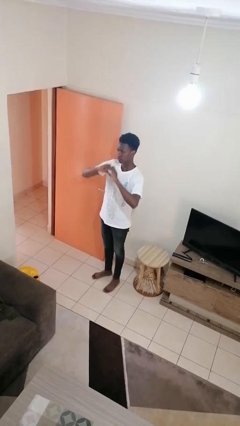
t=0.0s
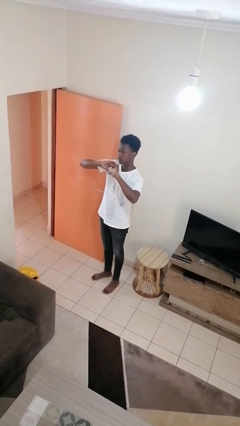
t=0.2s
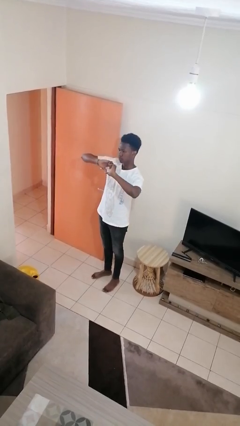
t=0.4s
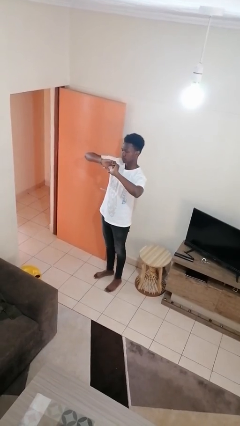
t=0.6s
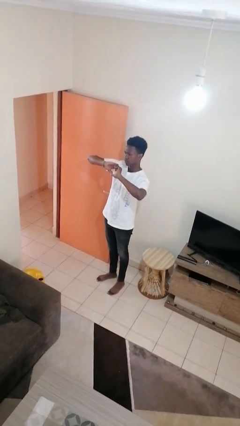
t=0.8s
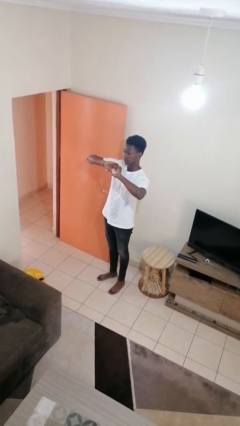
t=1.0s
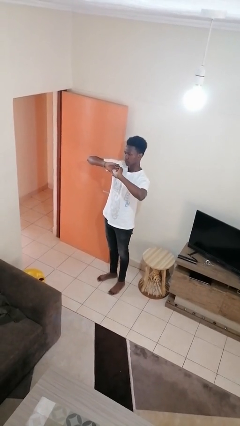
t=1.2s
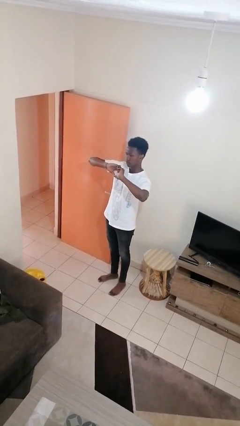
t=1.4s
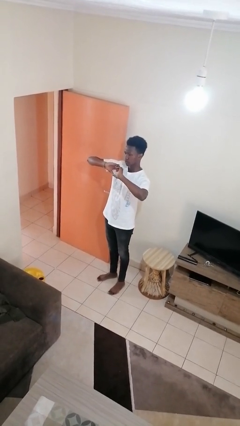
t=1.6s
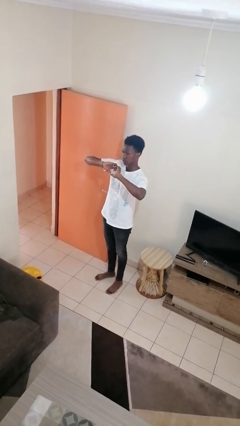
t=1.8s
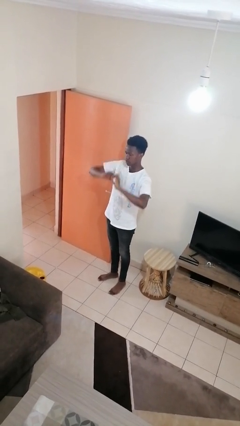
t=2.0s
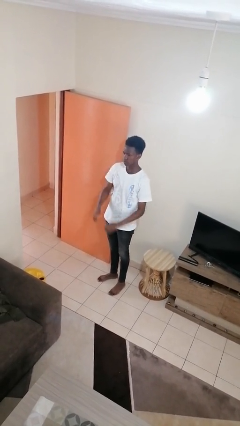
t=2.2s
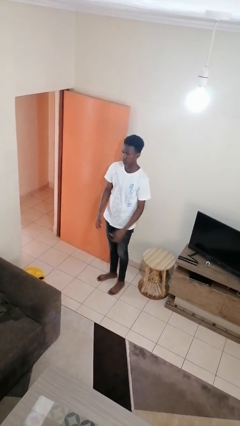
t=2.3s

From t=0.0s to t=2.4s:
person gestures heart

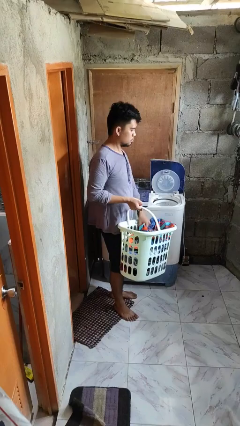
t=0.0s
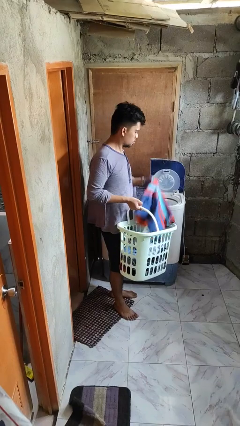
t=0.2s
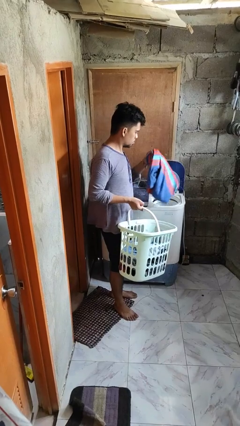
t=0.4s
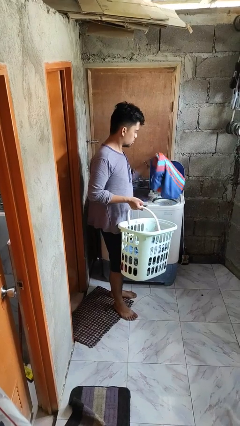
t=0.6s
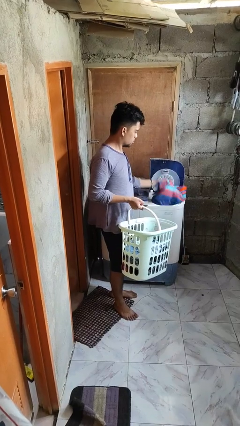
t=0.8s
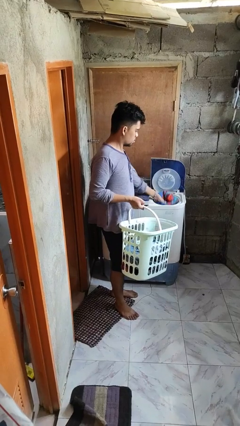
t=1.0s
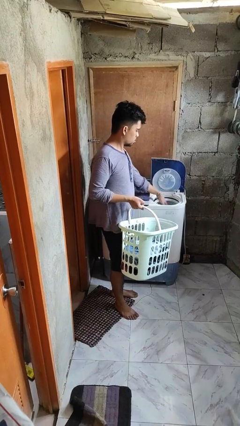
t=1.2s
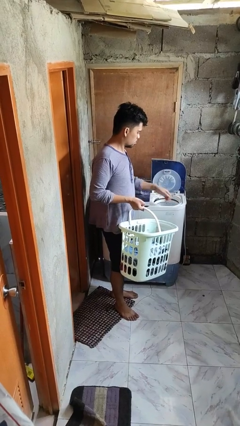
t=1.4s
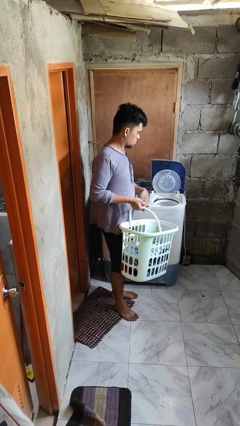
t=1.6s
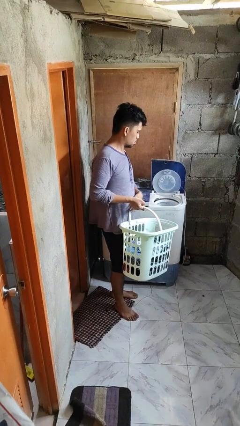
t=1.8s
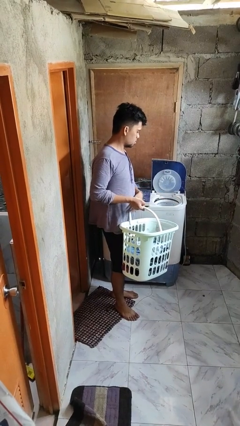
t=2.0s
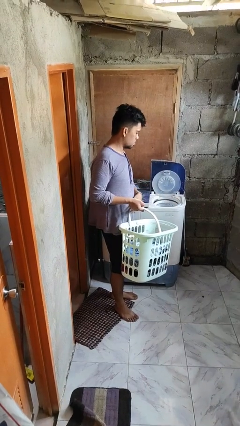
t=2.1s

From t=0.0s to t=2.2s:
person loads dryer

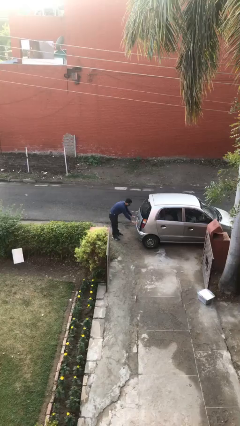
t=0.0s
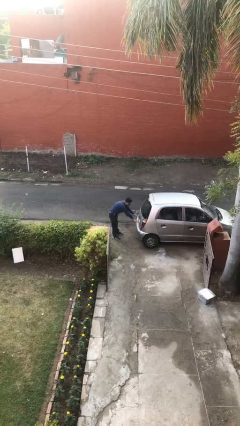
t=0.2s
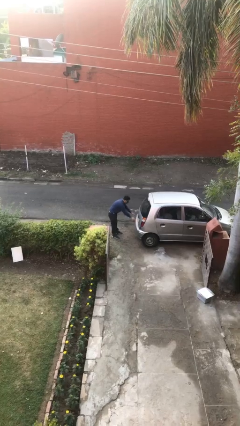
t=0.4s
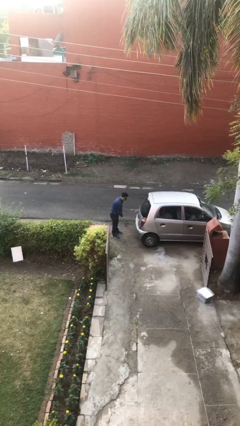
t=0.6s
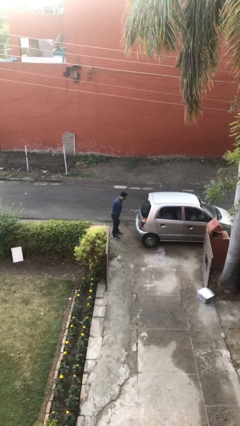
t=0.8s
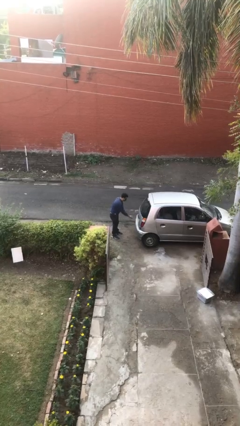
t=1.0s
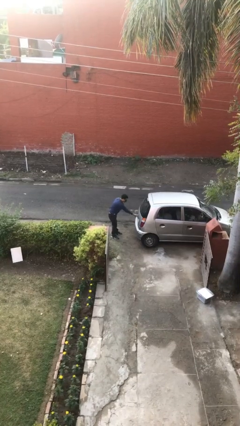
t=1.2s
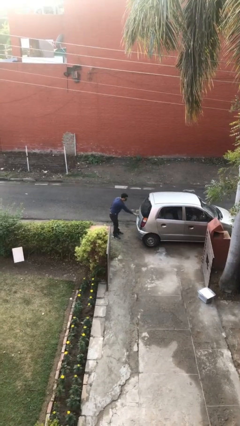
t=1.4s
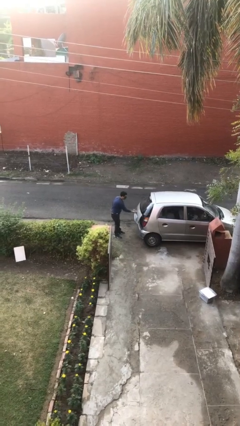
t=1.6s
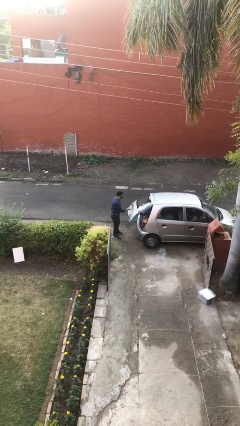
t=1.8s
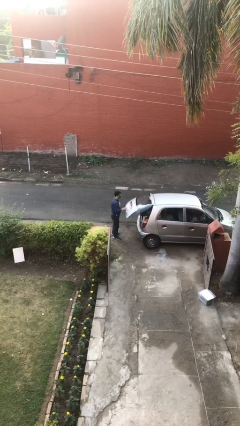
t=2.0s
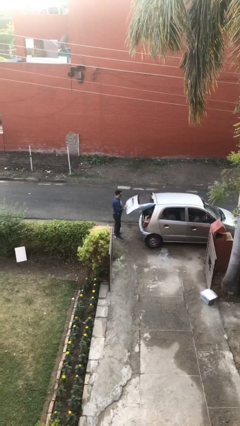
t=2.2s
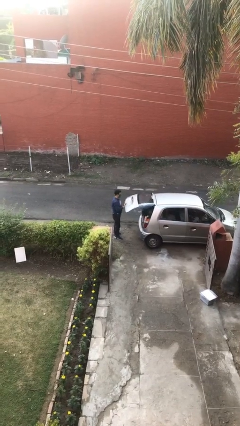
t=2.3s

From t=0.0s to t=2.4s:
person opens car trunk

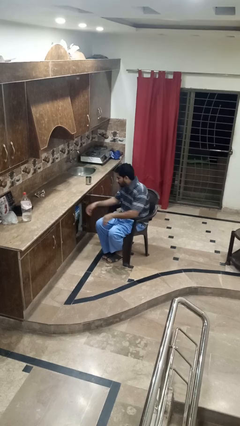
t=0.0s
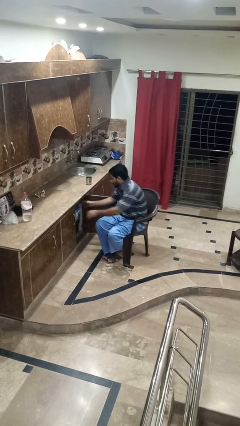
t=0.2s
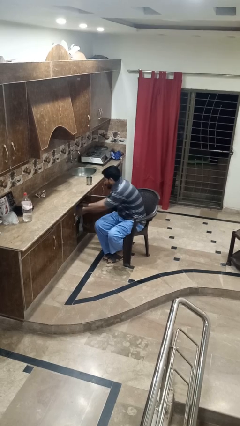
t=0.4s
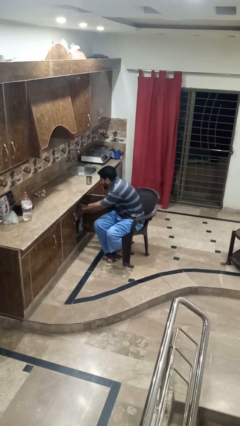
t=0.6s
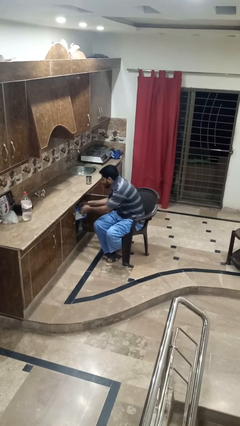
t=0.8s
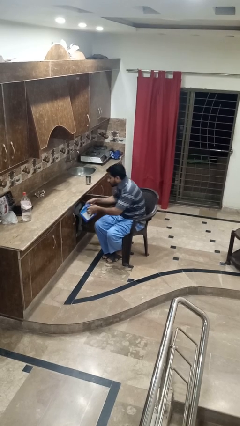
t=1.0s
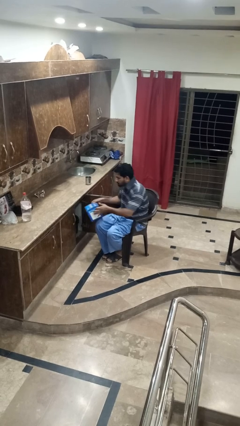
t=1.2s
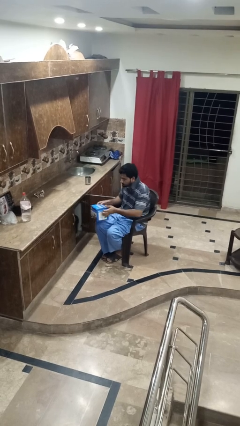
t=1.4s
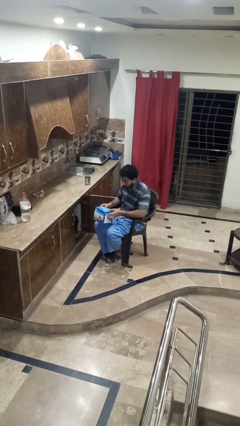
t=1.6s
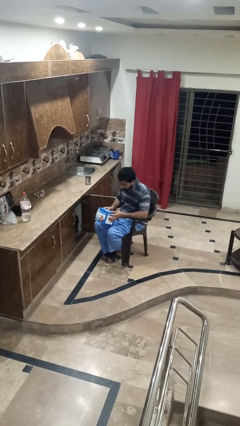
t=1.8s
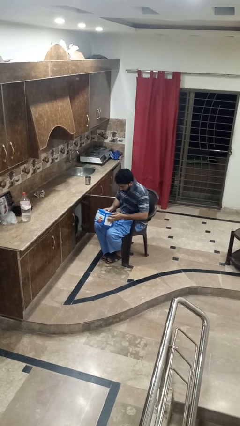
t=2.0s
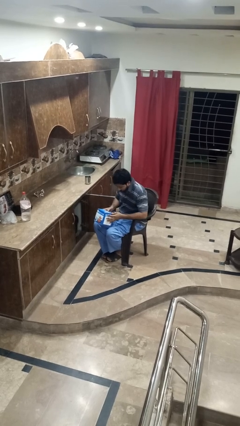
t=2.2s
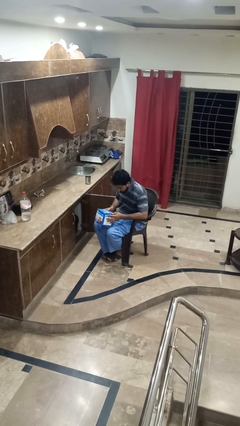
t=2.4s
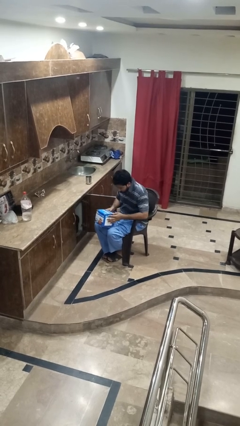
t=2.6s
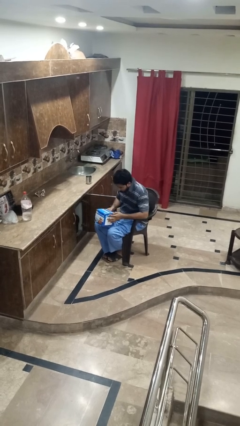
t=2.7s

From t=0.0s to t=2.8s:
person picks up object from cabinet

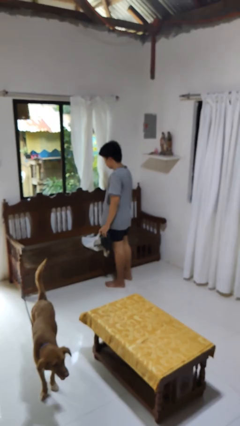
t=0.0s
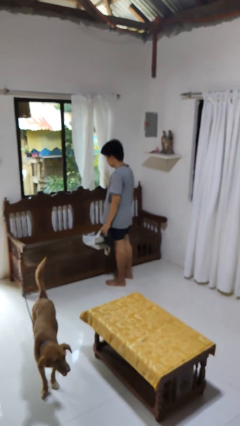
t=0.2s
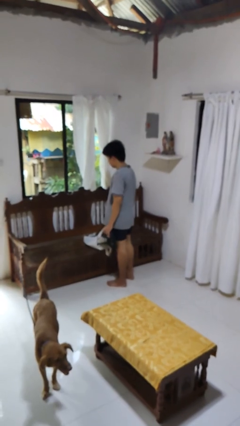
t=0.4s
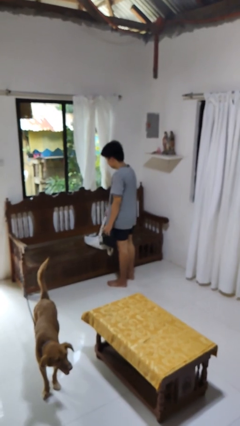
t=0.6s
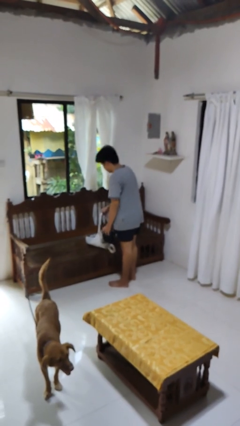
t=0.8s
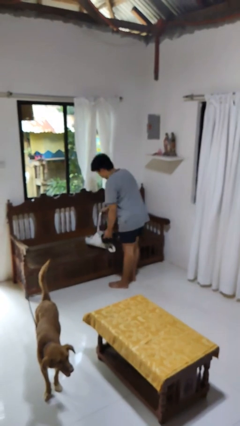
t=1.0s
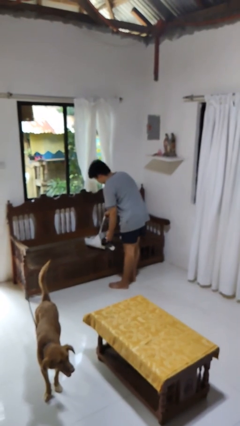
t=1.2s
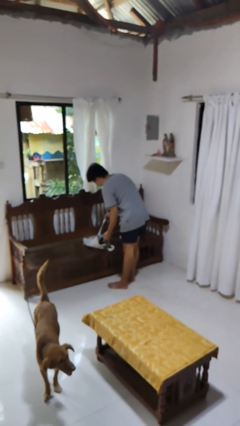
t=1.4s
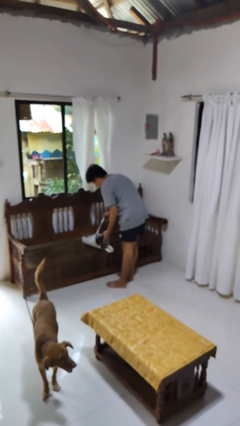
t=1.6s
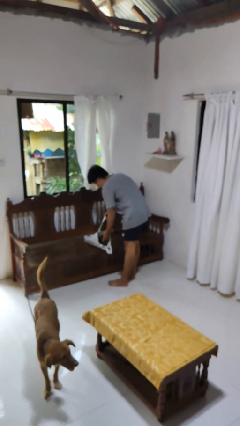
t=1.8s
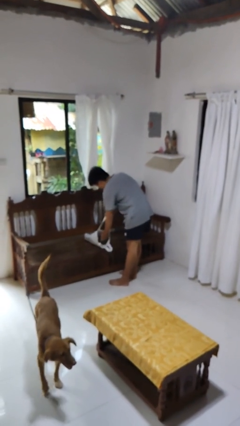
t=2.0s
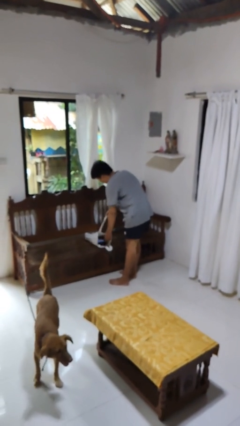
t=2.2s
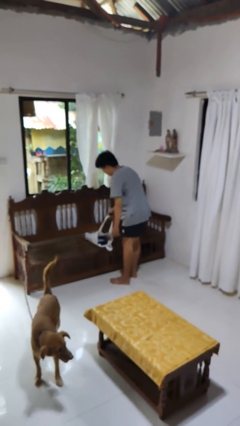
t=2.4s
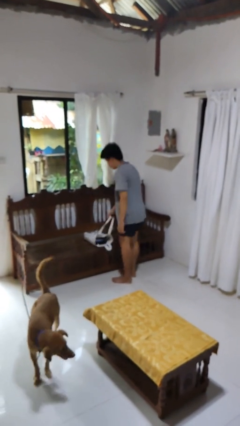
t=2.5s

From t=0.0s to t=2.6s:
person puts object into bag

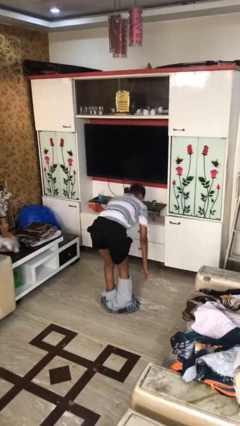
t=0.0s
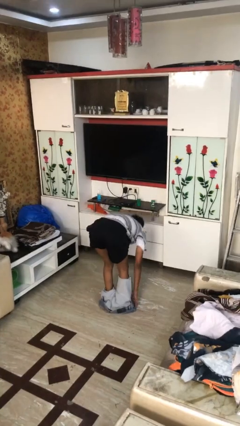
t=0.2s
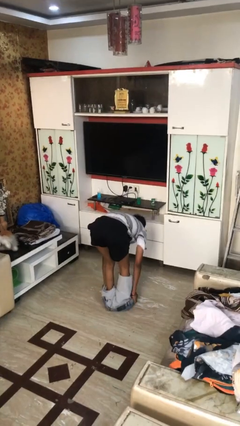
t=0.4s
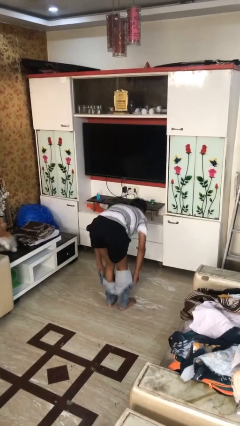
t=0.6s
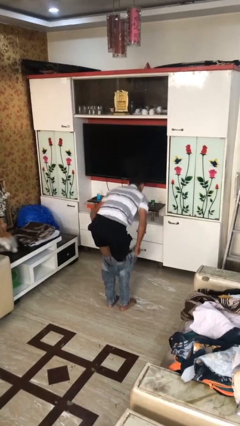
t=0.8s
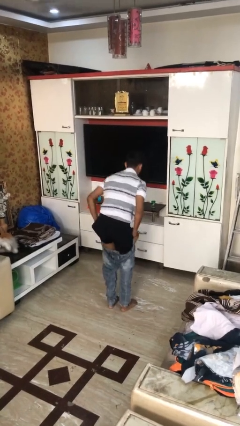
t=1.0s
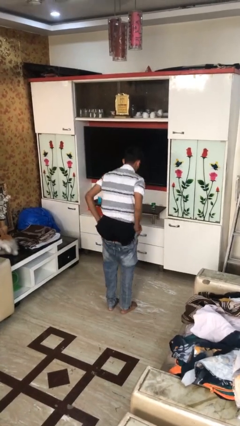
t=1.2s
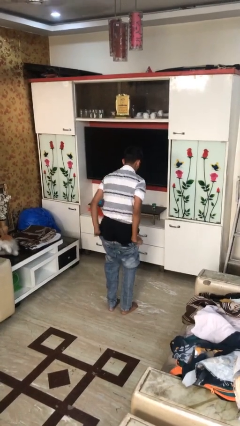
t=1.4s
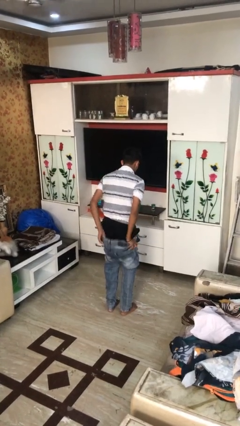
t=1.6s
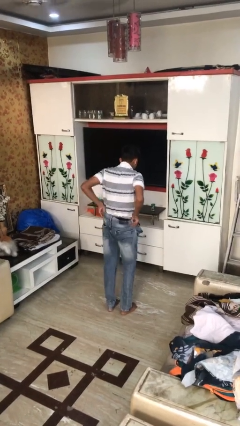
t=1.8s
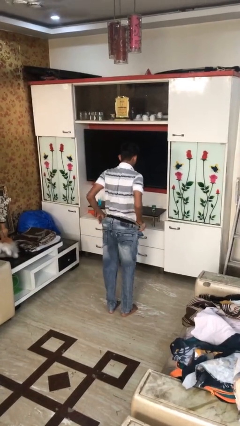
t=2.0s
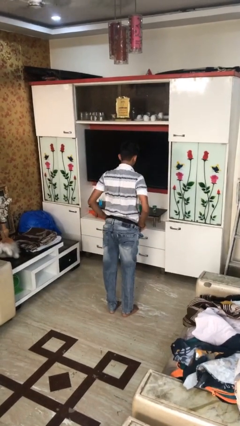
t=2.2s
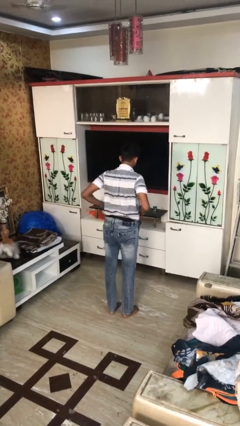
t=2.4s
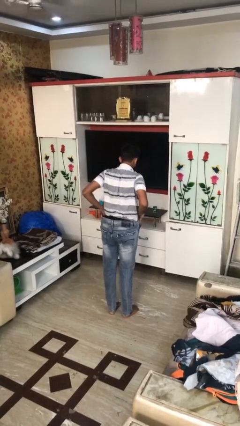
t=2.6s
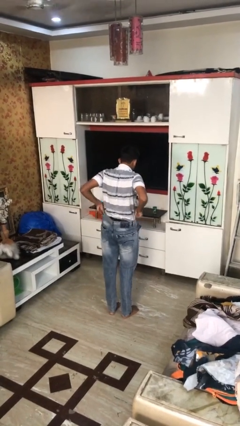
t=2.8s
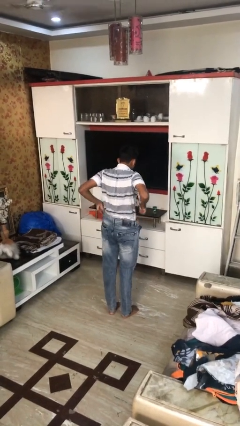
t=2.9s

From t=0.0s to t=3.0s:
person puts on pants

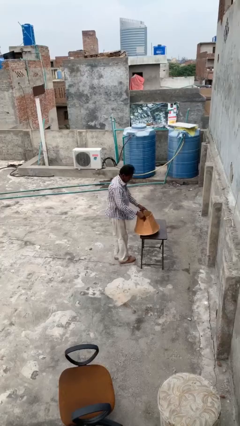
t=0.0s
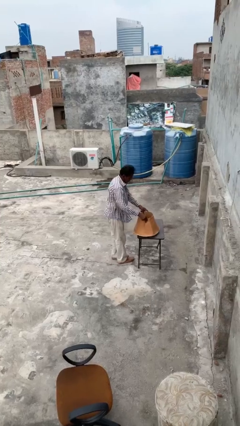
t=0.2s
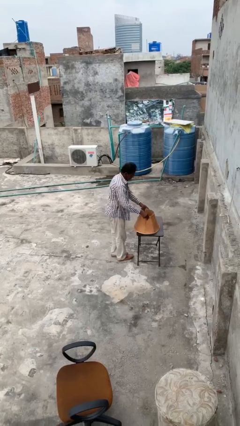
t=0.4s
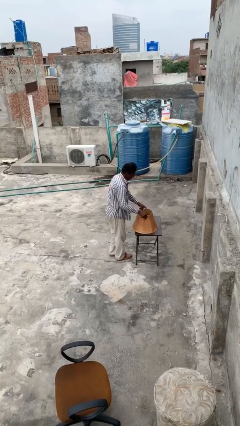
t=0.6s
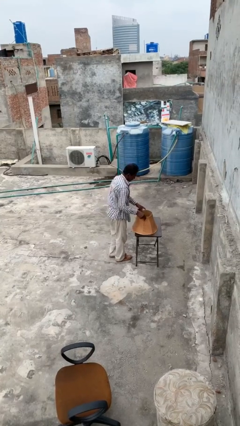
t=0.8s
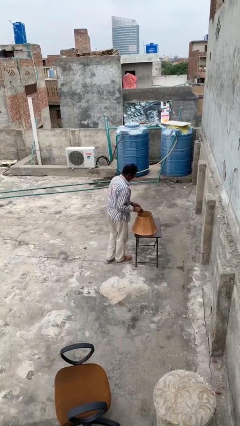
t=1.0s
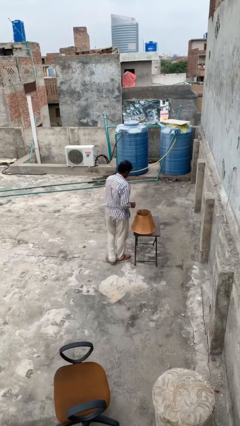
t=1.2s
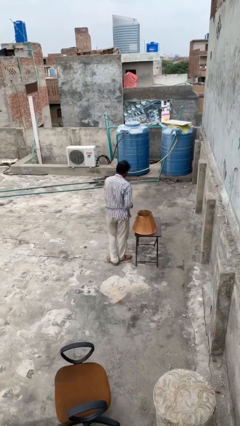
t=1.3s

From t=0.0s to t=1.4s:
person puts down object on table

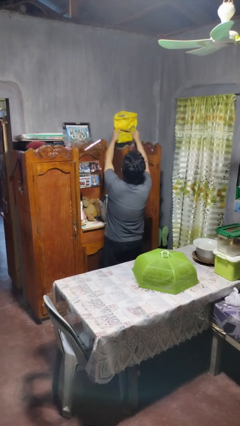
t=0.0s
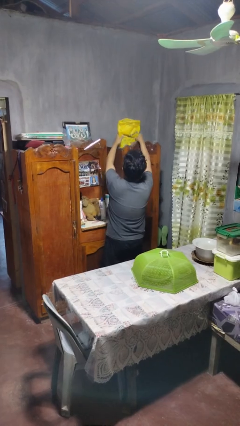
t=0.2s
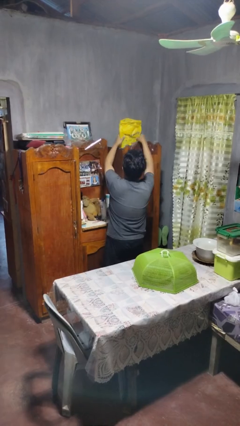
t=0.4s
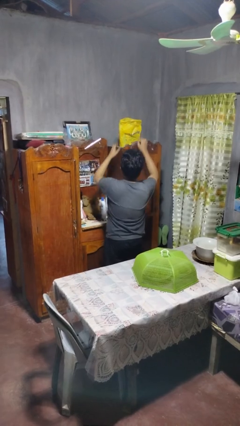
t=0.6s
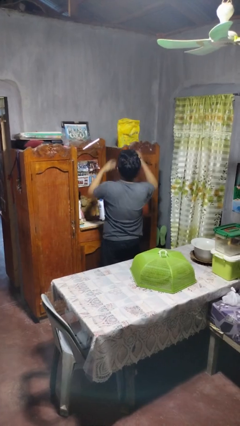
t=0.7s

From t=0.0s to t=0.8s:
person puts down object on shelf
